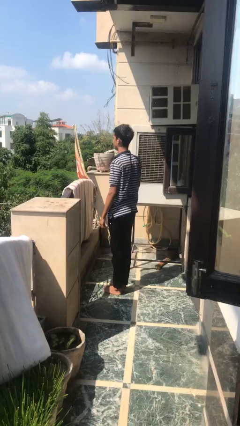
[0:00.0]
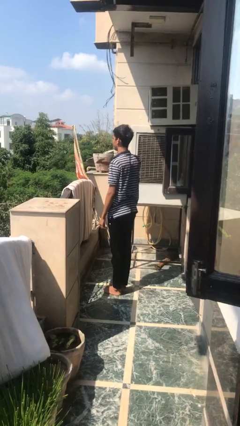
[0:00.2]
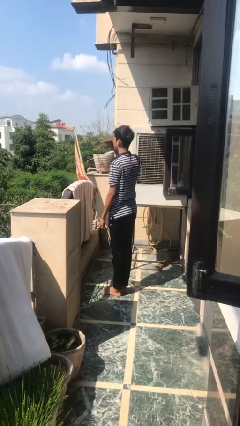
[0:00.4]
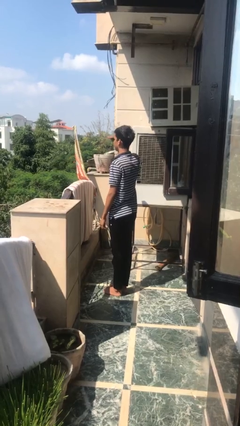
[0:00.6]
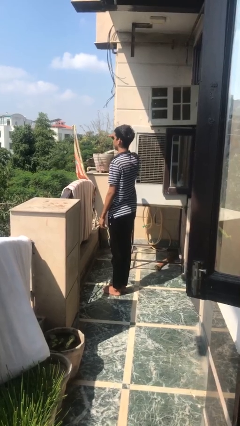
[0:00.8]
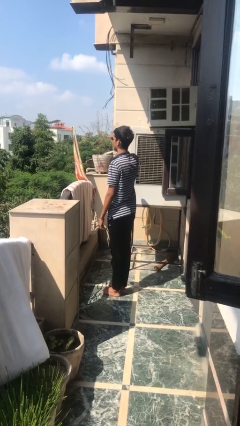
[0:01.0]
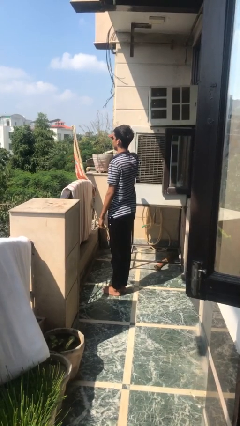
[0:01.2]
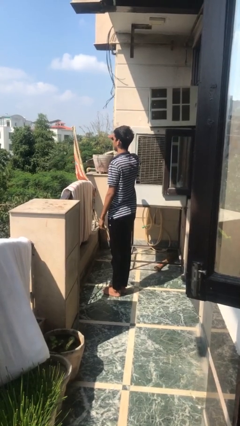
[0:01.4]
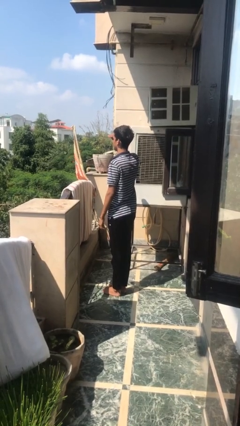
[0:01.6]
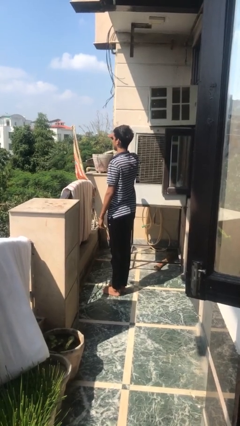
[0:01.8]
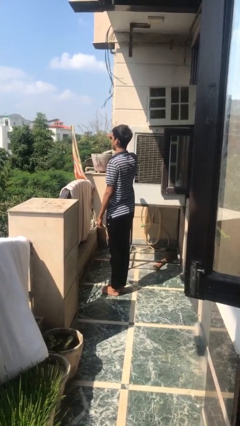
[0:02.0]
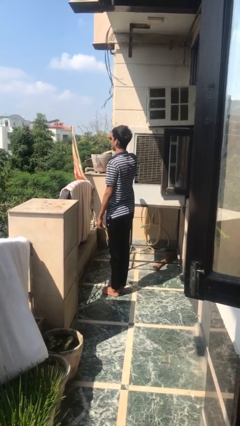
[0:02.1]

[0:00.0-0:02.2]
person shades eyes

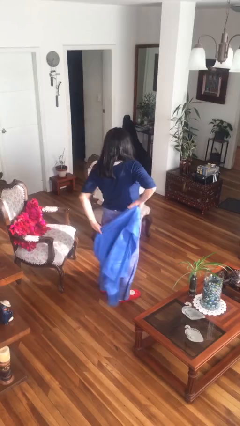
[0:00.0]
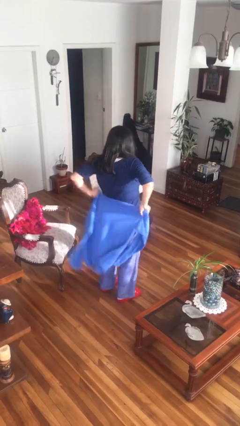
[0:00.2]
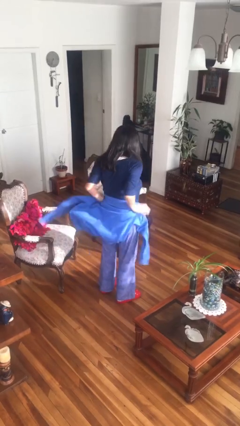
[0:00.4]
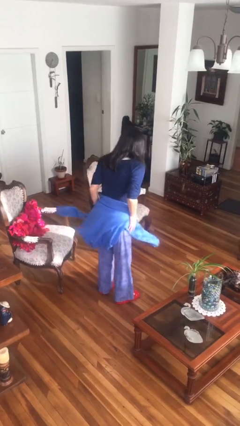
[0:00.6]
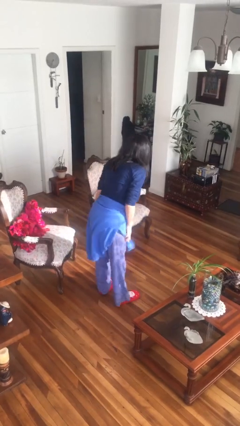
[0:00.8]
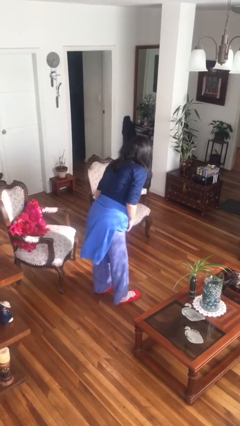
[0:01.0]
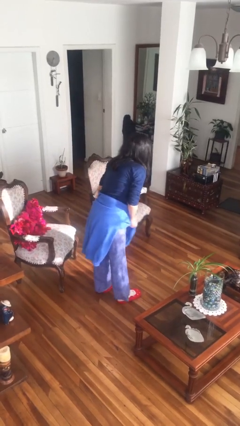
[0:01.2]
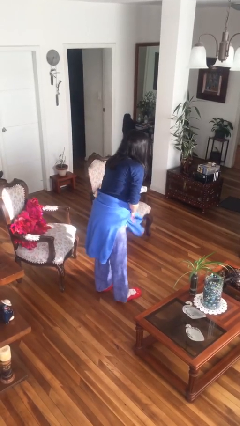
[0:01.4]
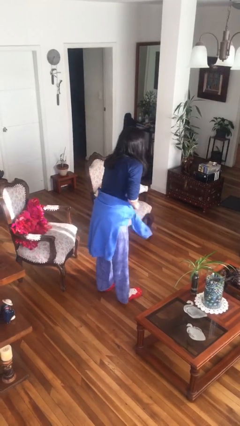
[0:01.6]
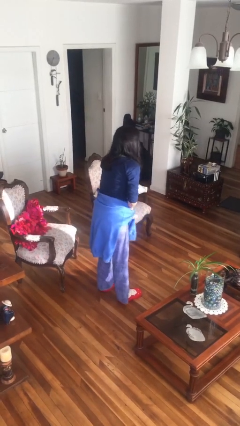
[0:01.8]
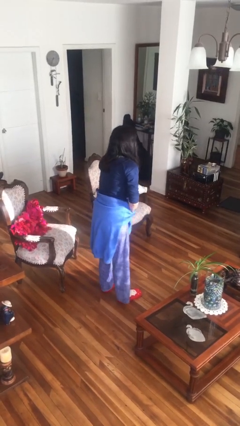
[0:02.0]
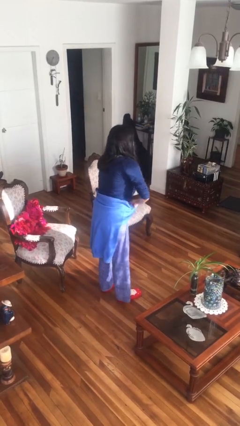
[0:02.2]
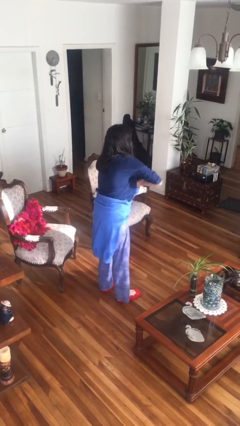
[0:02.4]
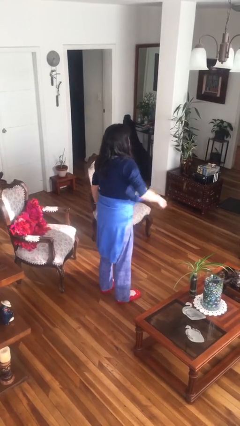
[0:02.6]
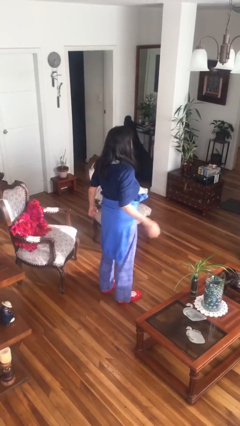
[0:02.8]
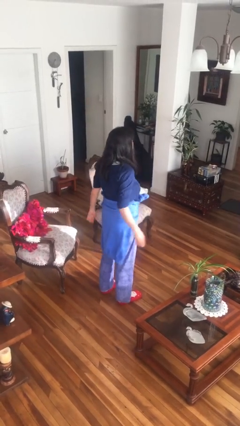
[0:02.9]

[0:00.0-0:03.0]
person ties jacket around waist

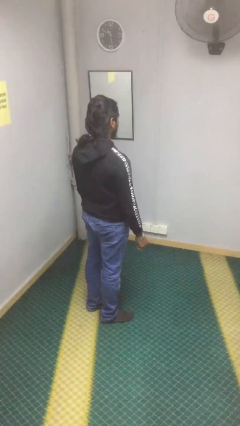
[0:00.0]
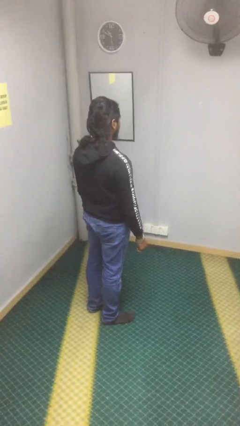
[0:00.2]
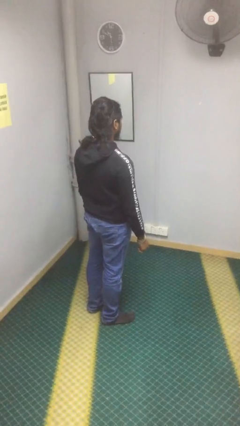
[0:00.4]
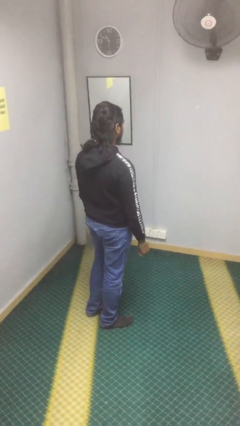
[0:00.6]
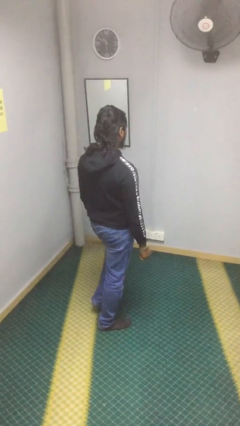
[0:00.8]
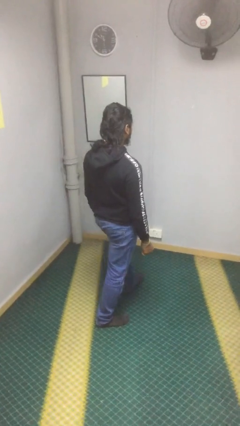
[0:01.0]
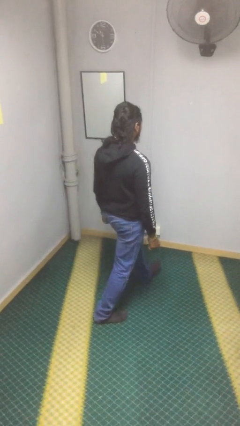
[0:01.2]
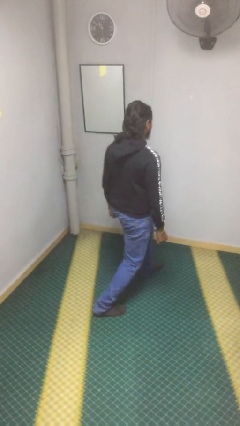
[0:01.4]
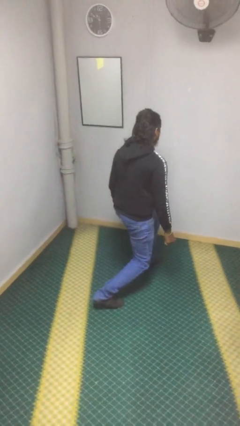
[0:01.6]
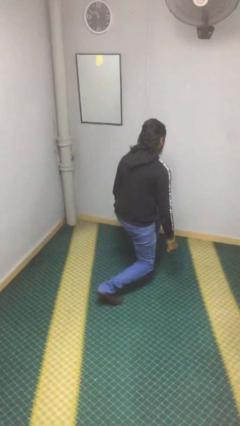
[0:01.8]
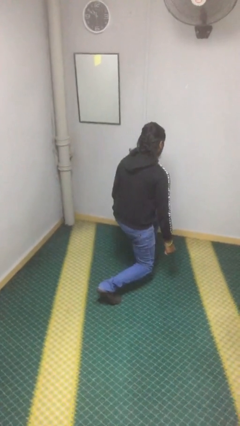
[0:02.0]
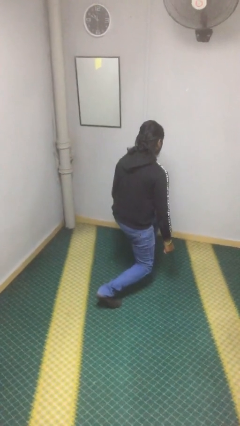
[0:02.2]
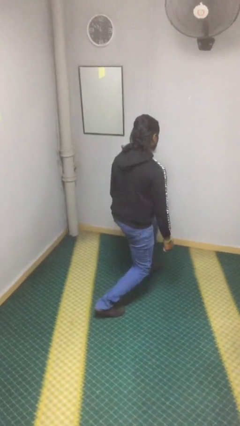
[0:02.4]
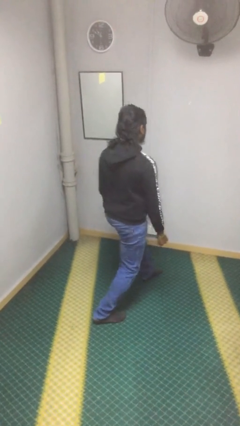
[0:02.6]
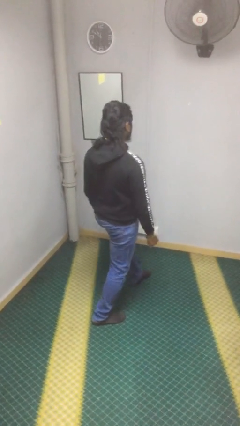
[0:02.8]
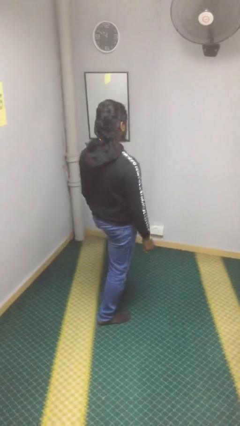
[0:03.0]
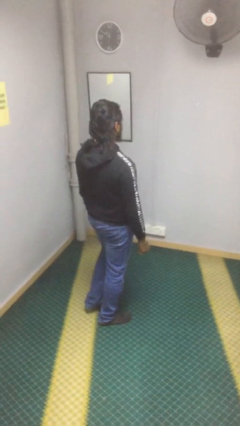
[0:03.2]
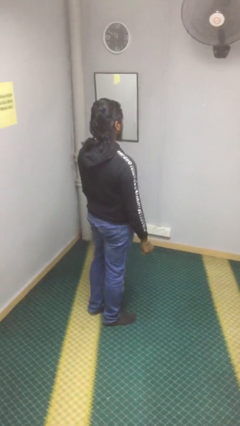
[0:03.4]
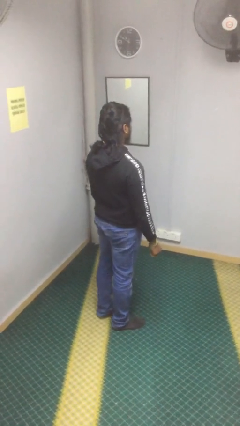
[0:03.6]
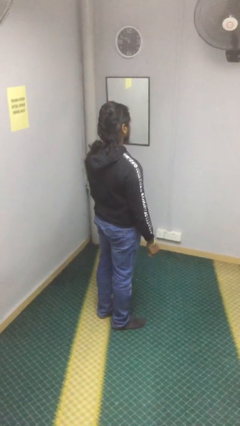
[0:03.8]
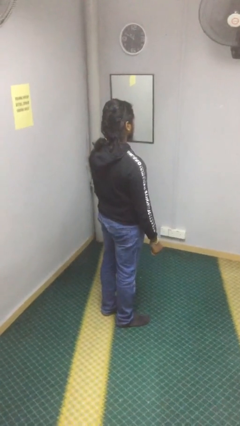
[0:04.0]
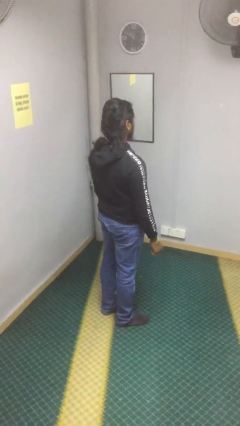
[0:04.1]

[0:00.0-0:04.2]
person exercises with lunges

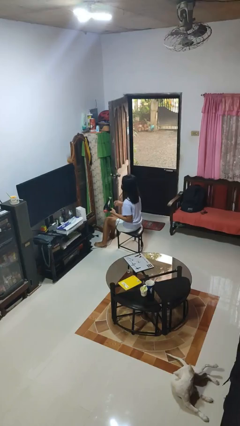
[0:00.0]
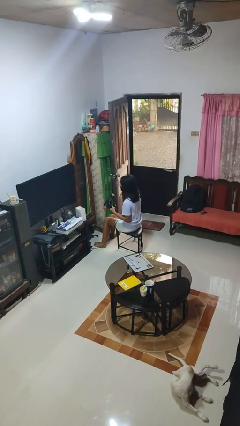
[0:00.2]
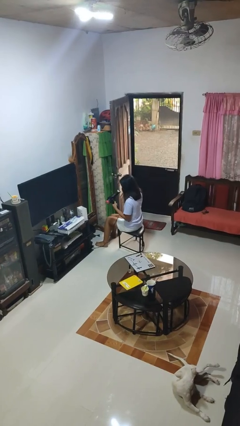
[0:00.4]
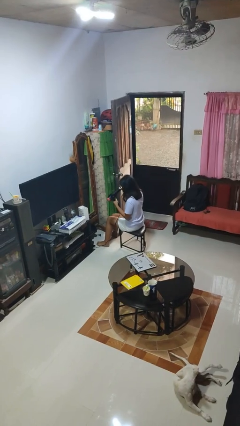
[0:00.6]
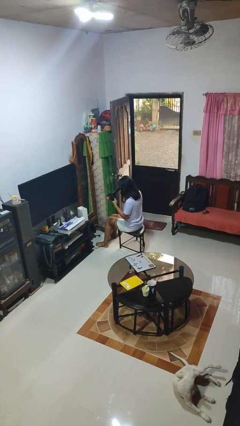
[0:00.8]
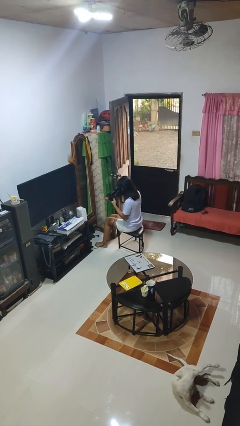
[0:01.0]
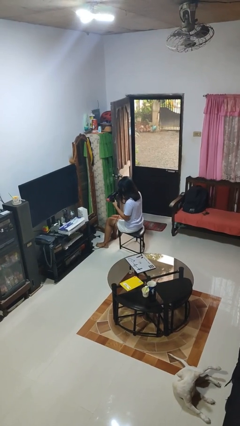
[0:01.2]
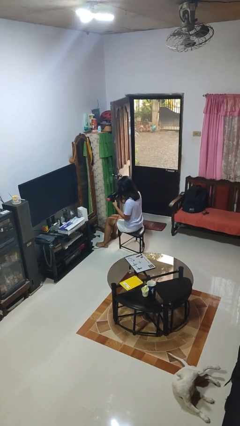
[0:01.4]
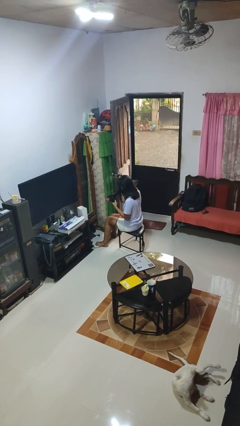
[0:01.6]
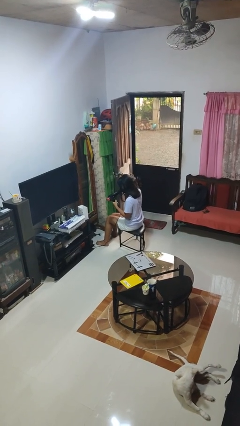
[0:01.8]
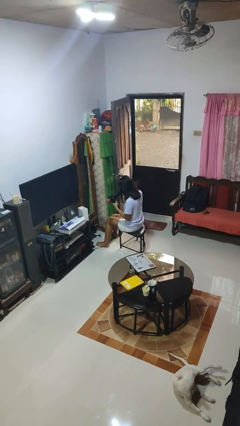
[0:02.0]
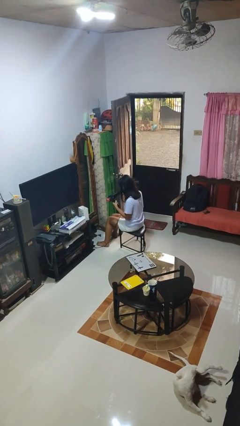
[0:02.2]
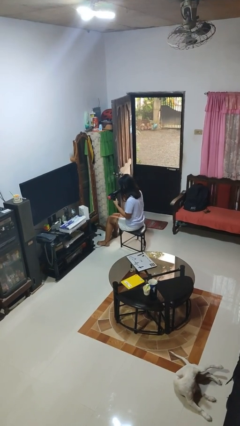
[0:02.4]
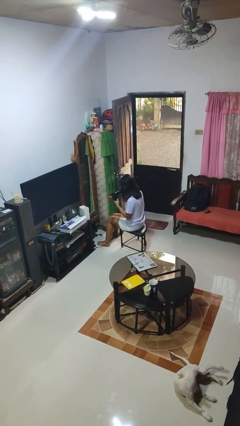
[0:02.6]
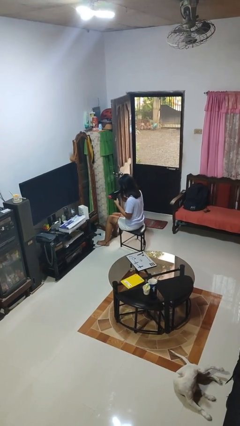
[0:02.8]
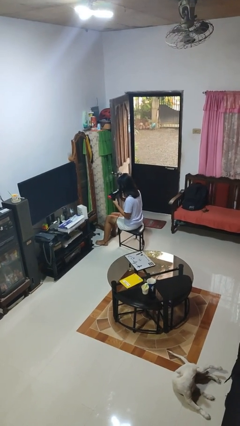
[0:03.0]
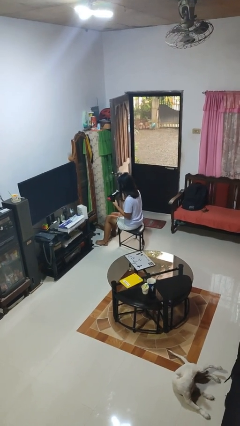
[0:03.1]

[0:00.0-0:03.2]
person dries hair with hairdryer

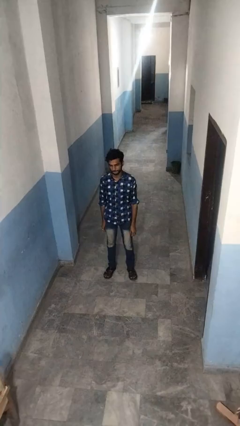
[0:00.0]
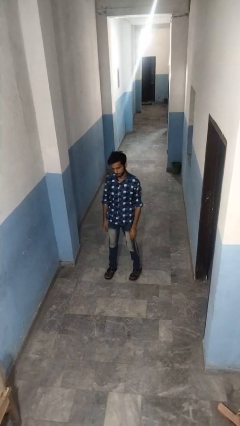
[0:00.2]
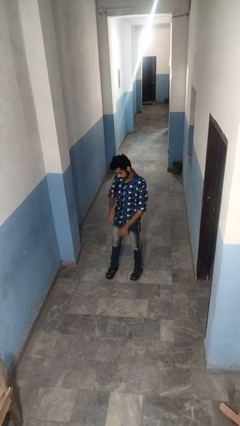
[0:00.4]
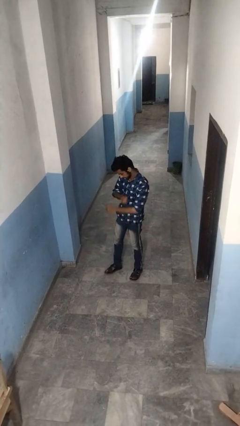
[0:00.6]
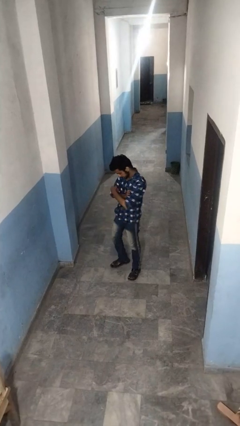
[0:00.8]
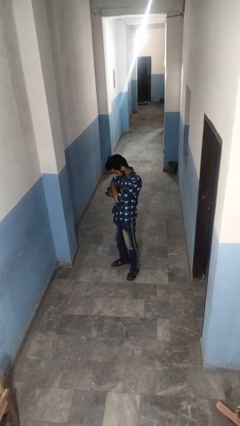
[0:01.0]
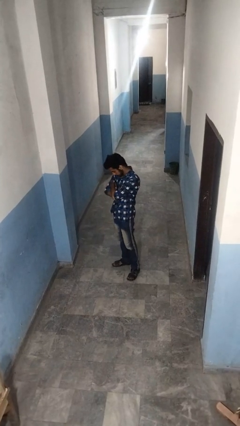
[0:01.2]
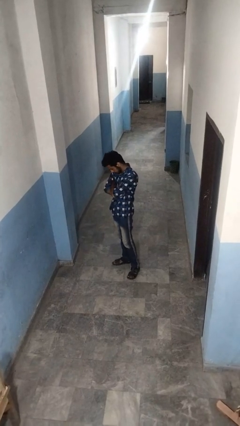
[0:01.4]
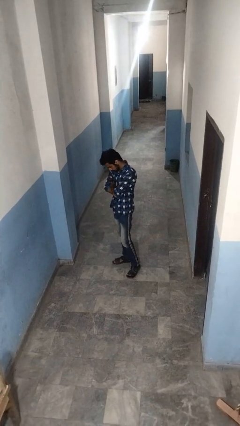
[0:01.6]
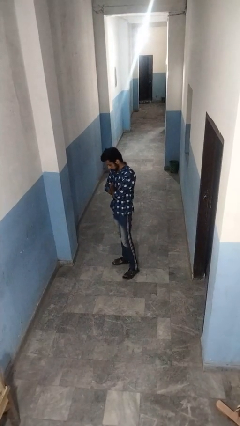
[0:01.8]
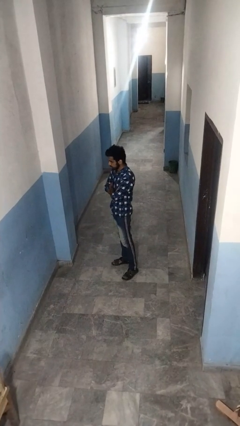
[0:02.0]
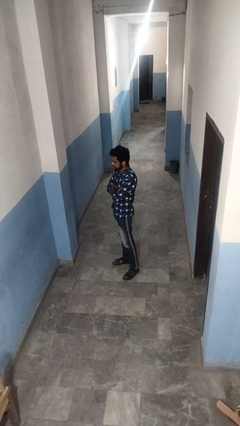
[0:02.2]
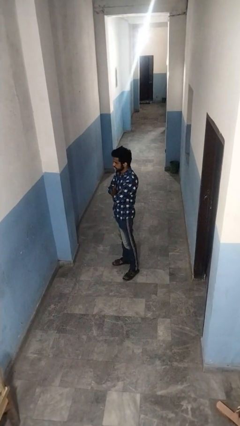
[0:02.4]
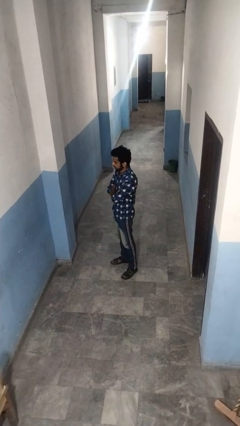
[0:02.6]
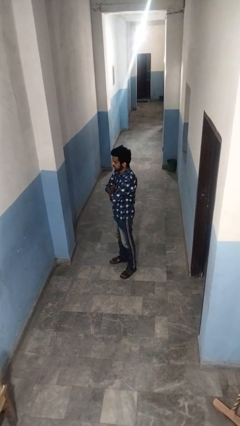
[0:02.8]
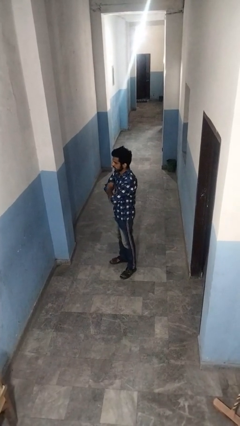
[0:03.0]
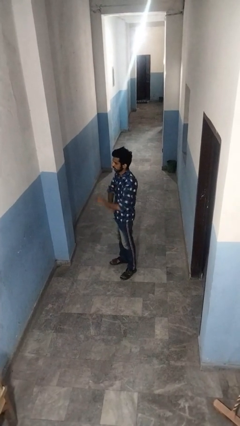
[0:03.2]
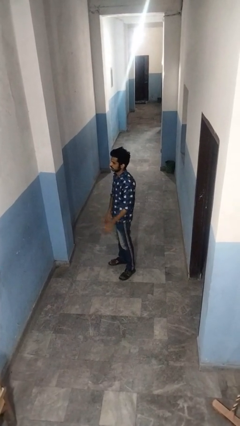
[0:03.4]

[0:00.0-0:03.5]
person crosses arms

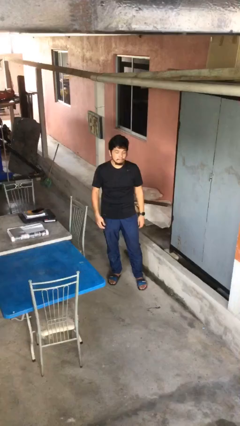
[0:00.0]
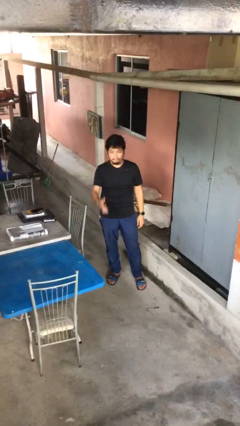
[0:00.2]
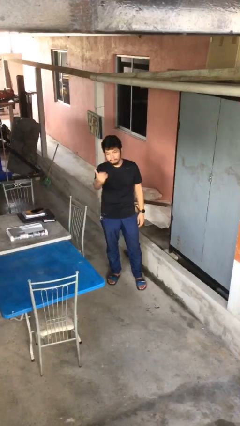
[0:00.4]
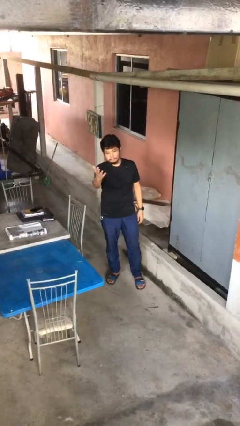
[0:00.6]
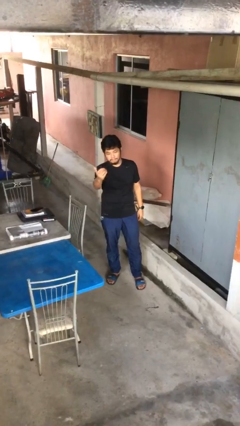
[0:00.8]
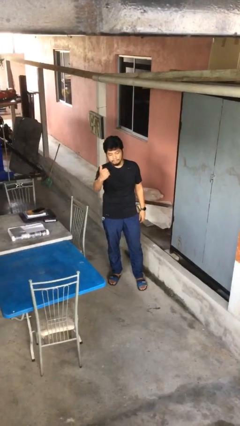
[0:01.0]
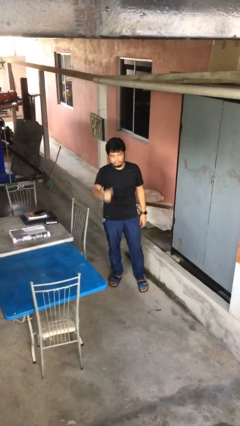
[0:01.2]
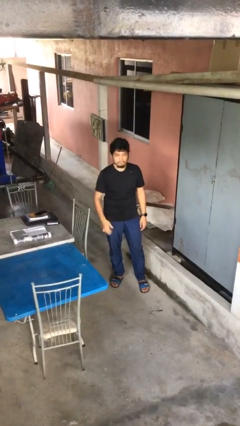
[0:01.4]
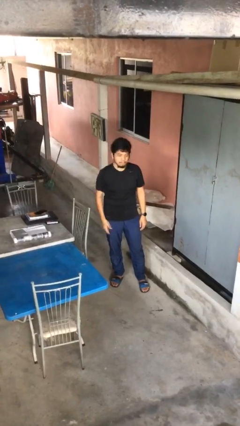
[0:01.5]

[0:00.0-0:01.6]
person gestures come here

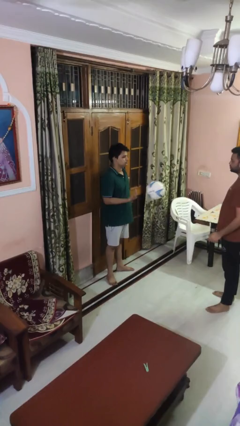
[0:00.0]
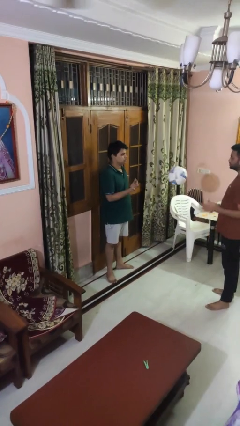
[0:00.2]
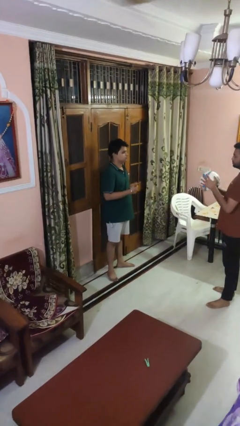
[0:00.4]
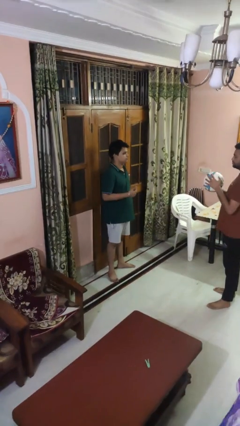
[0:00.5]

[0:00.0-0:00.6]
person throws object to person
